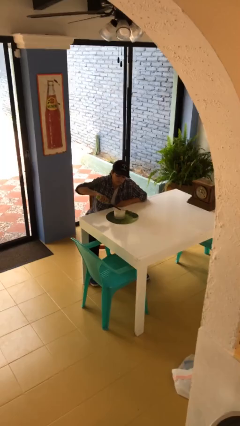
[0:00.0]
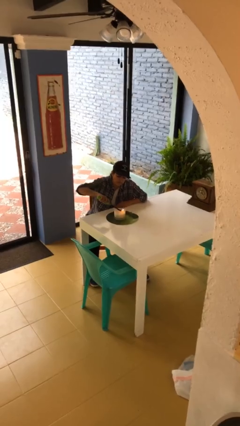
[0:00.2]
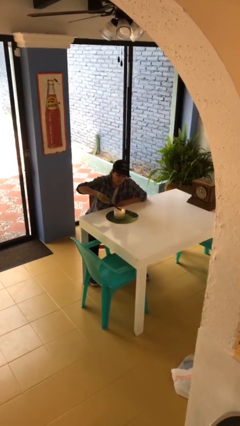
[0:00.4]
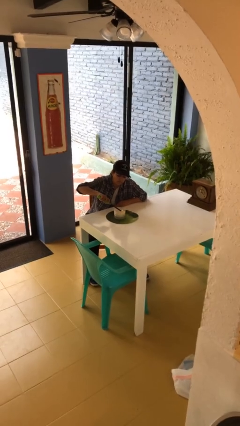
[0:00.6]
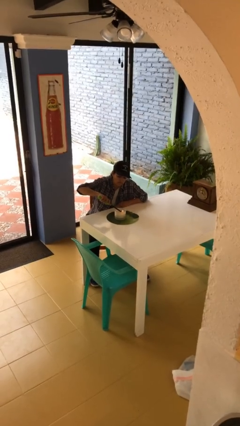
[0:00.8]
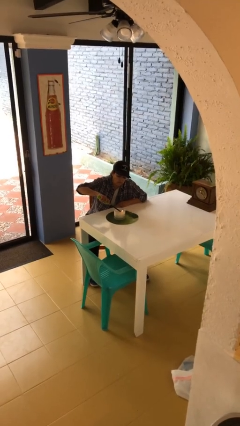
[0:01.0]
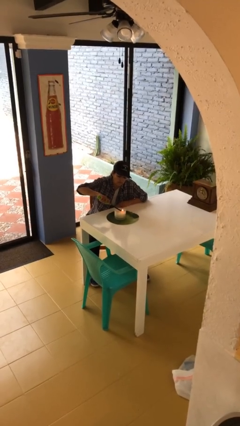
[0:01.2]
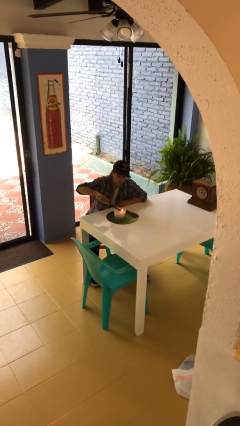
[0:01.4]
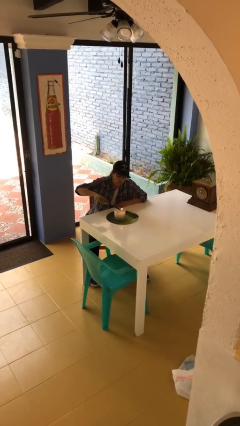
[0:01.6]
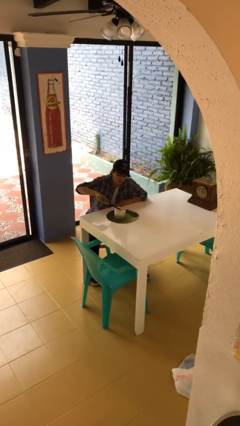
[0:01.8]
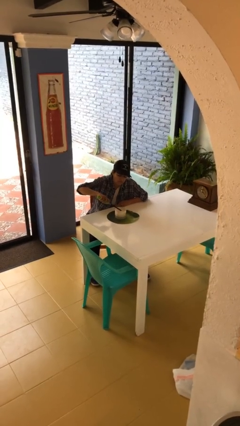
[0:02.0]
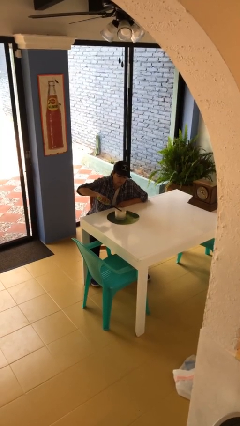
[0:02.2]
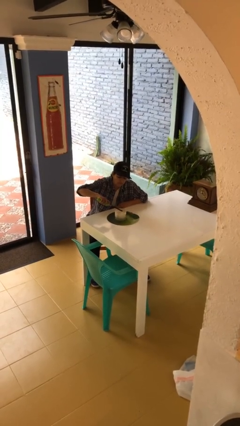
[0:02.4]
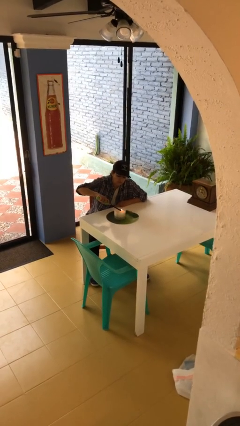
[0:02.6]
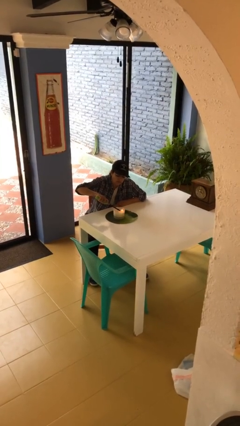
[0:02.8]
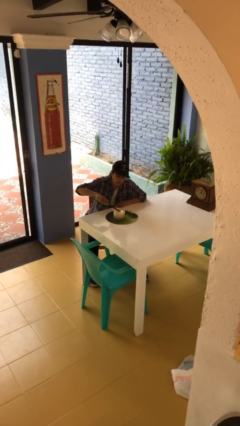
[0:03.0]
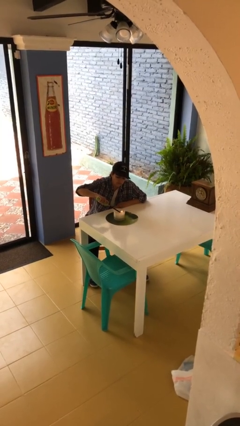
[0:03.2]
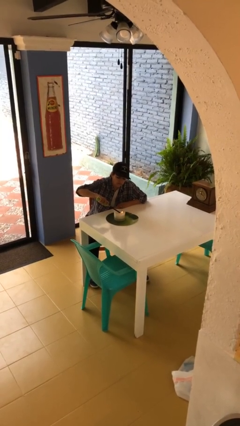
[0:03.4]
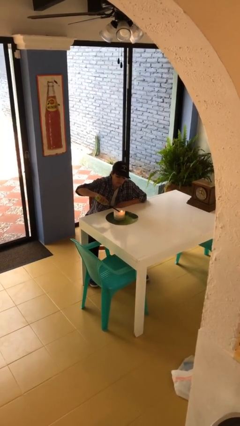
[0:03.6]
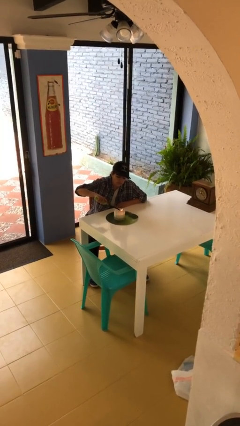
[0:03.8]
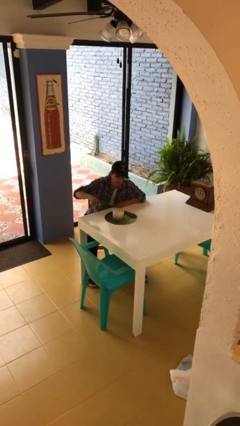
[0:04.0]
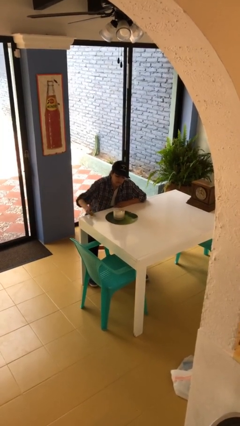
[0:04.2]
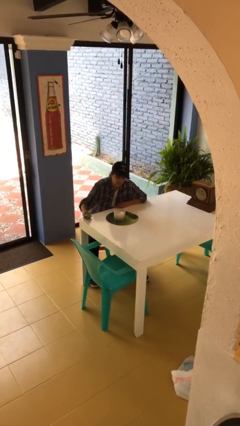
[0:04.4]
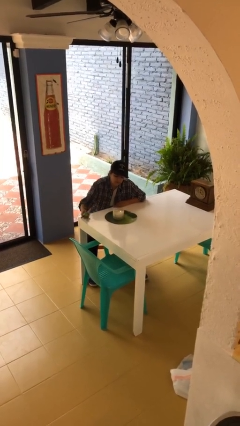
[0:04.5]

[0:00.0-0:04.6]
person lights candle

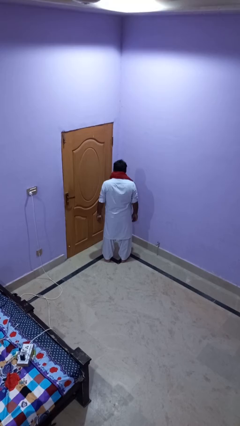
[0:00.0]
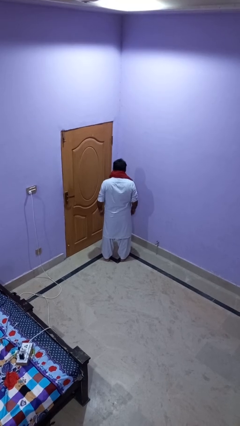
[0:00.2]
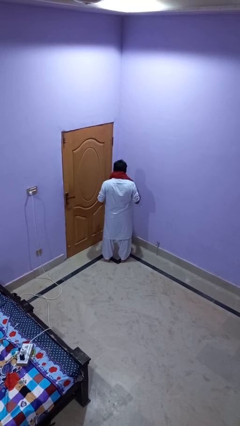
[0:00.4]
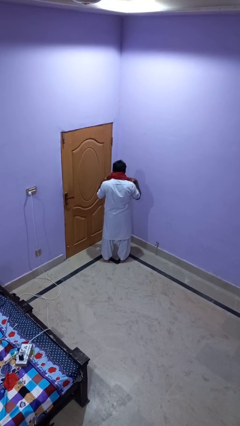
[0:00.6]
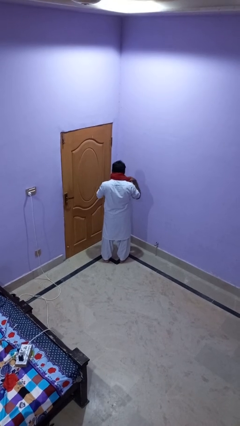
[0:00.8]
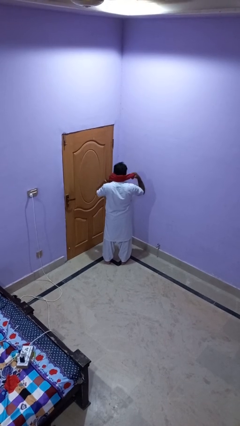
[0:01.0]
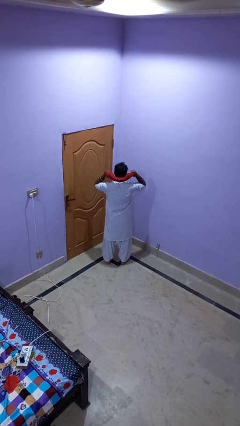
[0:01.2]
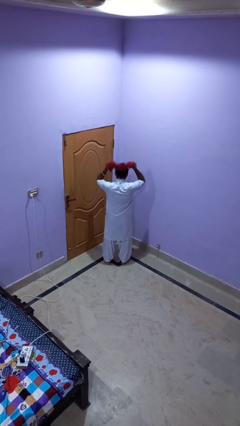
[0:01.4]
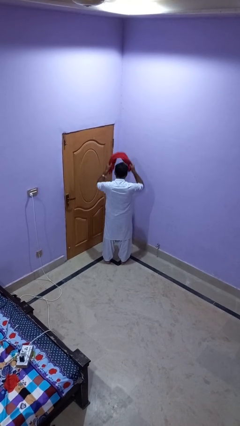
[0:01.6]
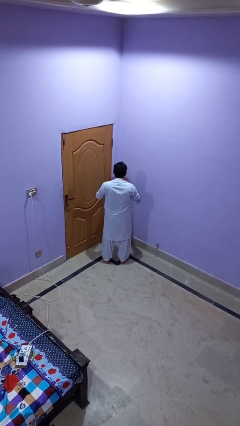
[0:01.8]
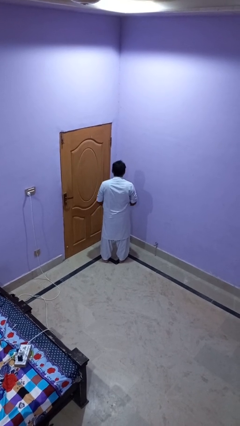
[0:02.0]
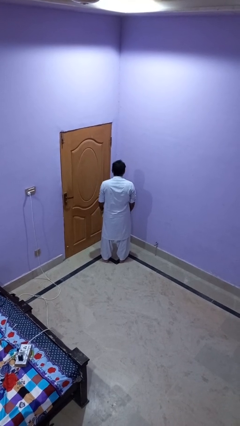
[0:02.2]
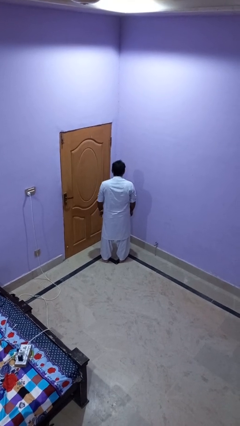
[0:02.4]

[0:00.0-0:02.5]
person takes off scarf

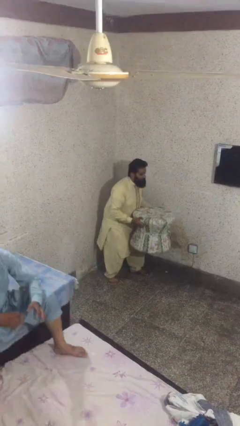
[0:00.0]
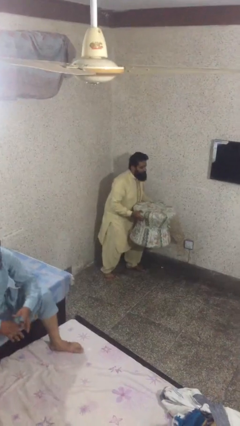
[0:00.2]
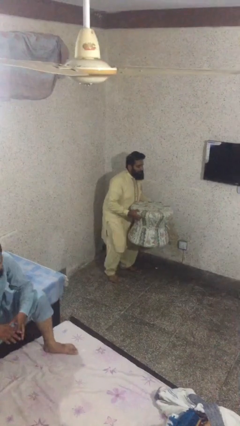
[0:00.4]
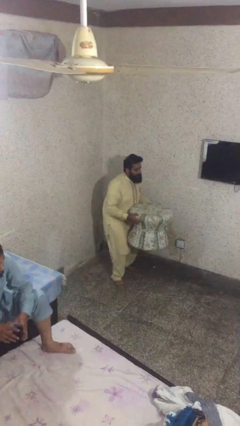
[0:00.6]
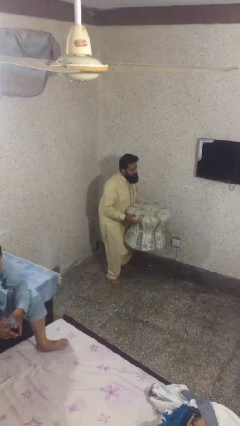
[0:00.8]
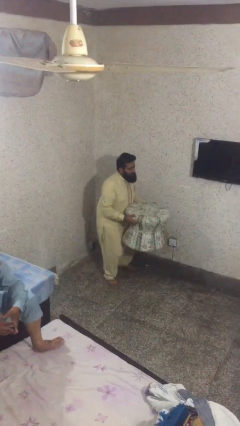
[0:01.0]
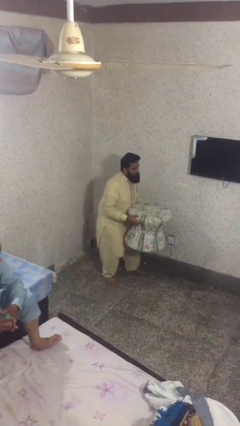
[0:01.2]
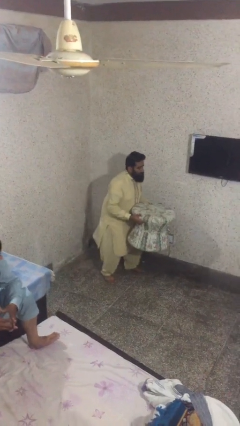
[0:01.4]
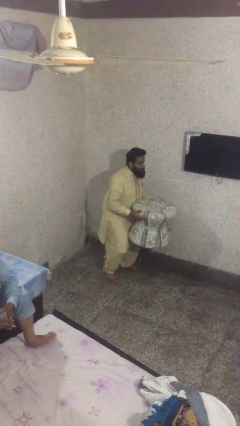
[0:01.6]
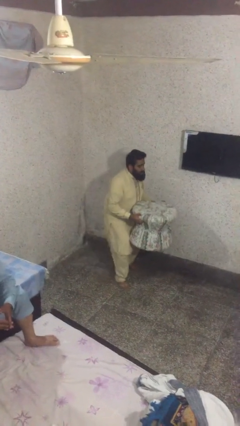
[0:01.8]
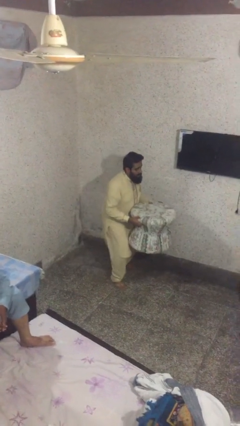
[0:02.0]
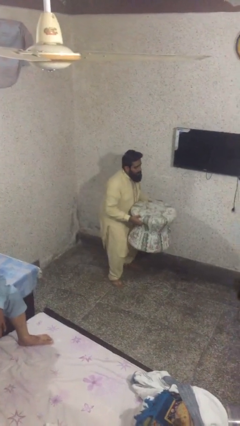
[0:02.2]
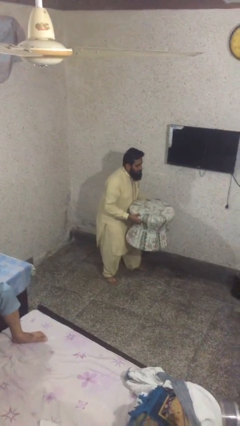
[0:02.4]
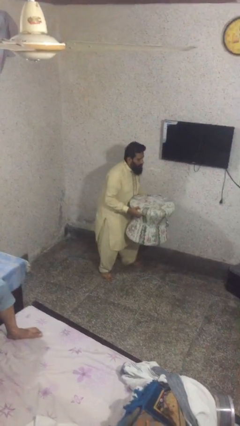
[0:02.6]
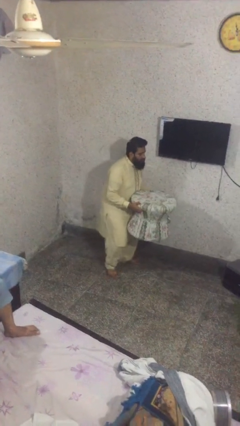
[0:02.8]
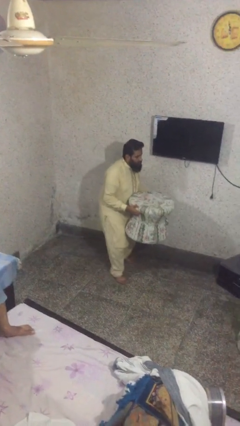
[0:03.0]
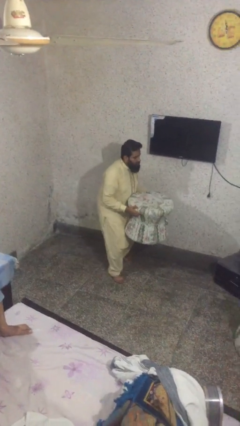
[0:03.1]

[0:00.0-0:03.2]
person carries heavy object

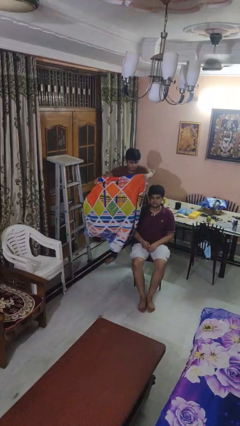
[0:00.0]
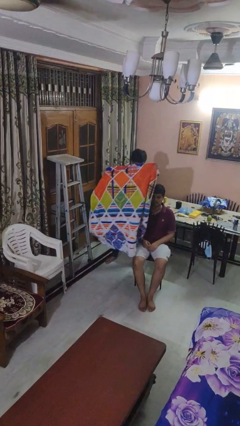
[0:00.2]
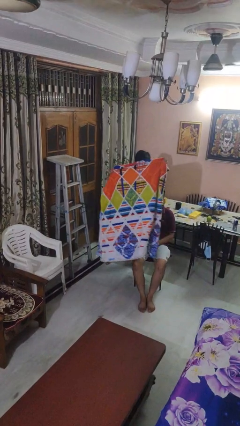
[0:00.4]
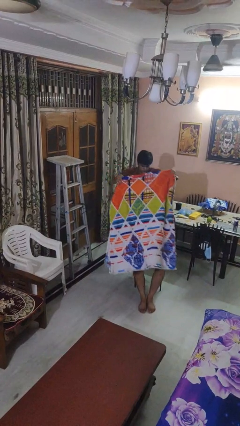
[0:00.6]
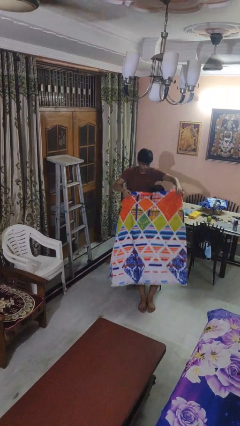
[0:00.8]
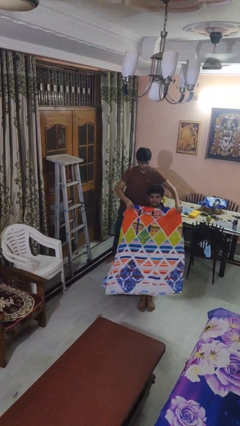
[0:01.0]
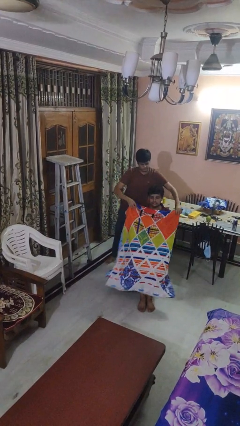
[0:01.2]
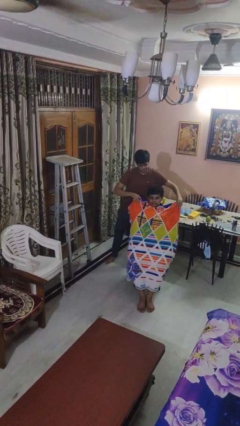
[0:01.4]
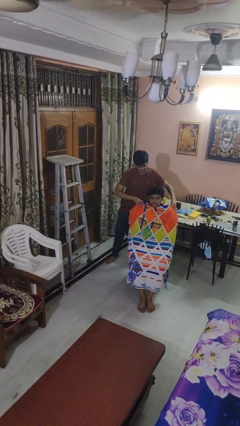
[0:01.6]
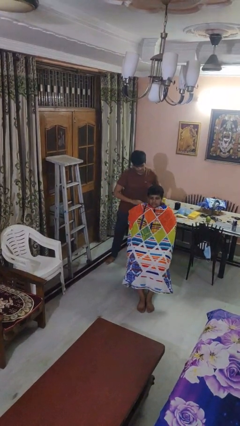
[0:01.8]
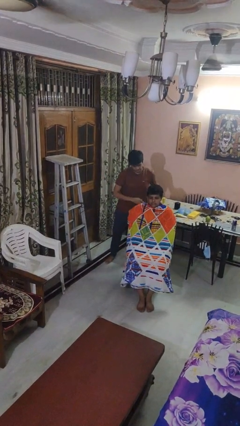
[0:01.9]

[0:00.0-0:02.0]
person covers friend with blanket

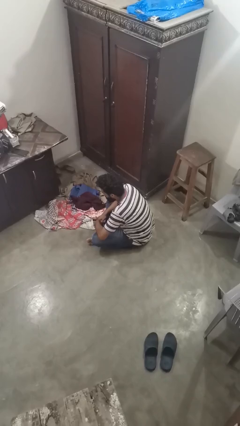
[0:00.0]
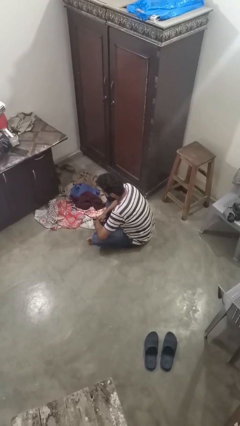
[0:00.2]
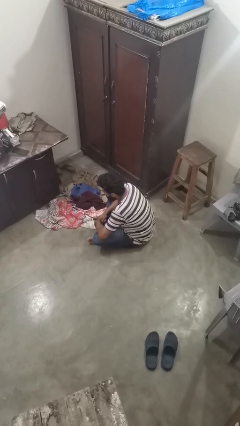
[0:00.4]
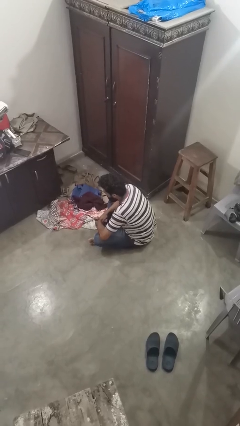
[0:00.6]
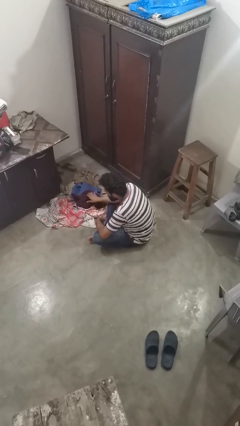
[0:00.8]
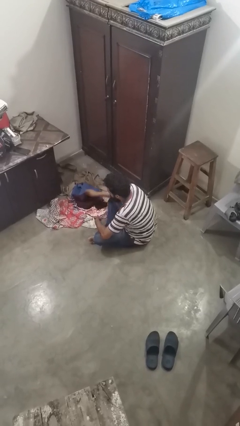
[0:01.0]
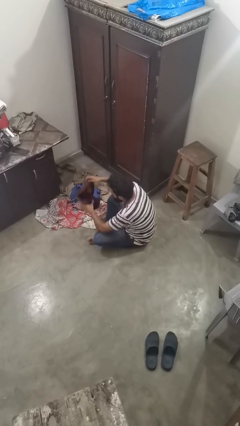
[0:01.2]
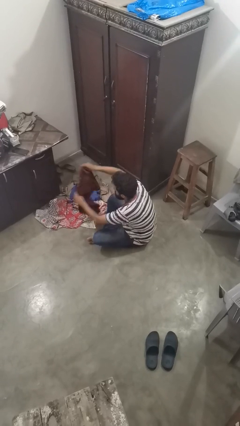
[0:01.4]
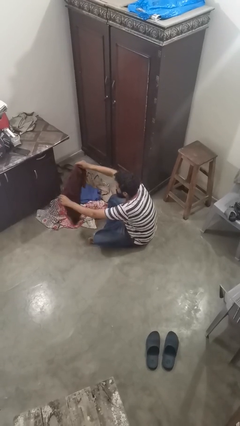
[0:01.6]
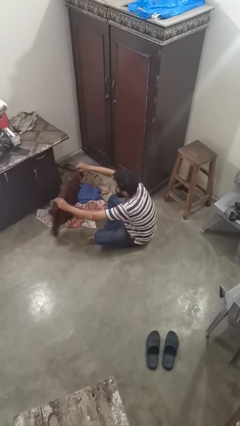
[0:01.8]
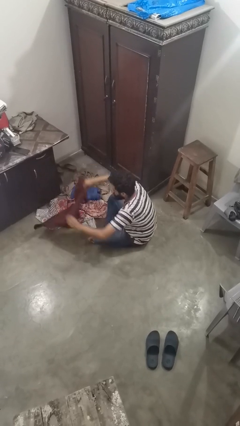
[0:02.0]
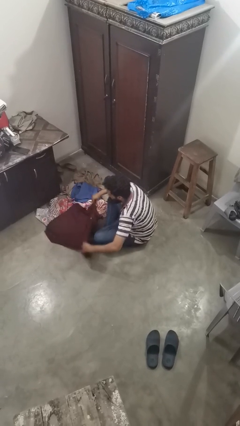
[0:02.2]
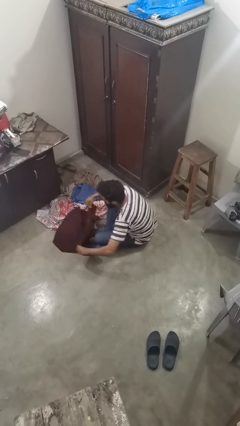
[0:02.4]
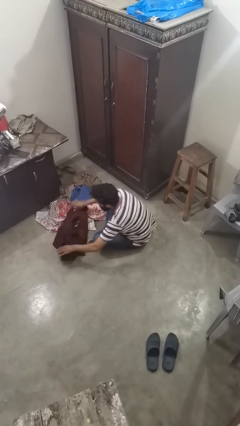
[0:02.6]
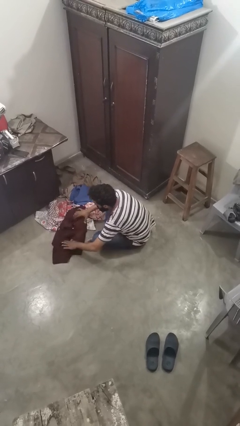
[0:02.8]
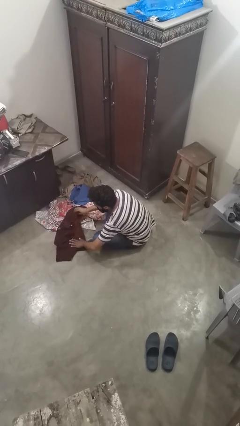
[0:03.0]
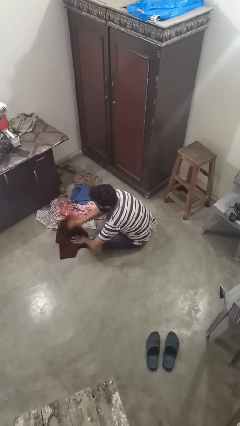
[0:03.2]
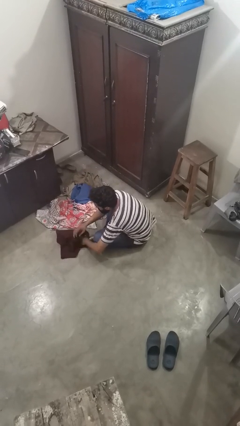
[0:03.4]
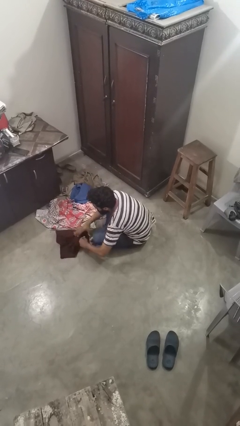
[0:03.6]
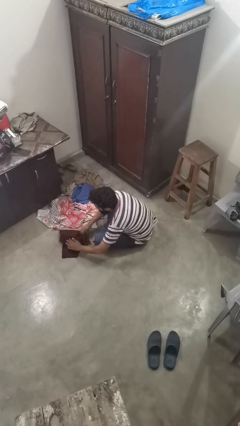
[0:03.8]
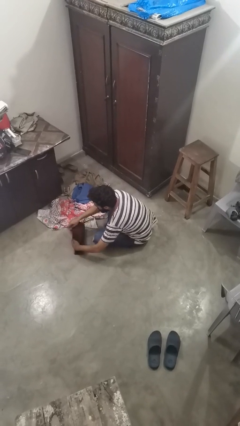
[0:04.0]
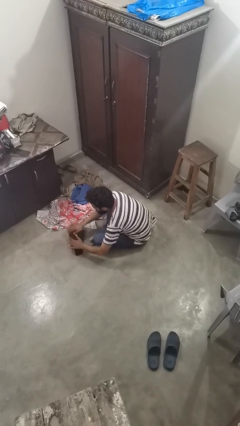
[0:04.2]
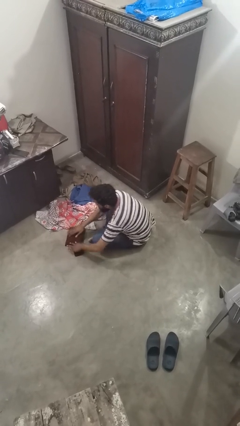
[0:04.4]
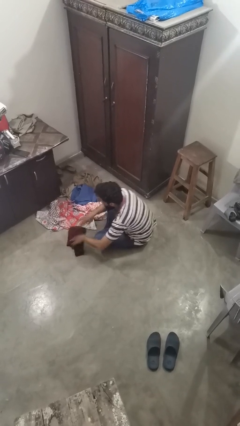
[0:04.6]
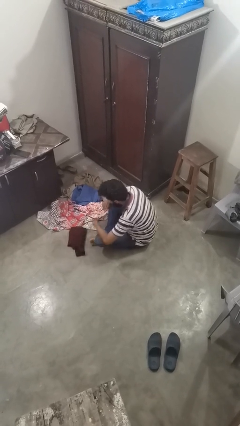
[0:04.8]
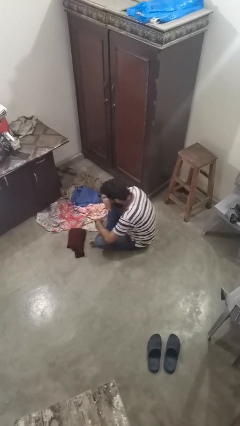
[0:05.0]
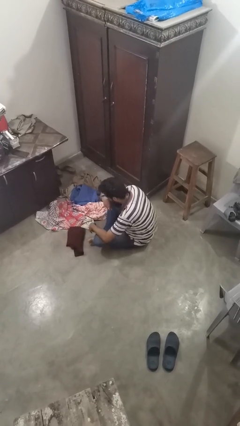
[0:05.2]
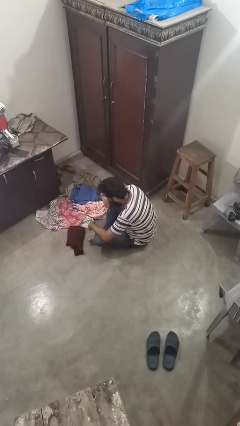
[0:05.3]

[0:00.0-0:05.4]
person folds shirt

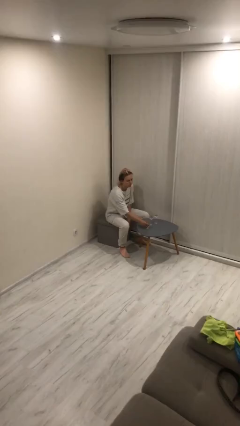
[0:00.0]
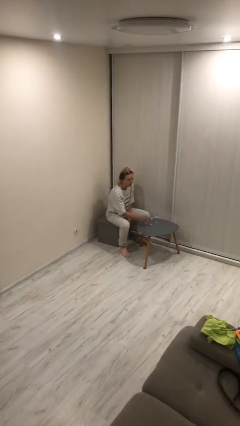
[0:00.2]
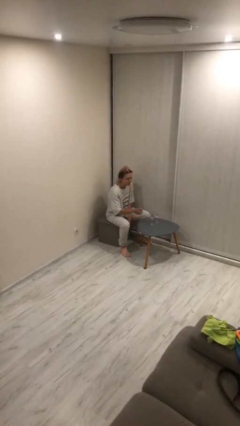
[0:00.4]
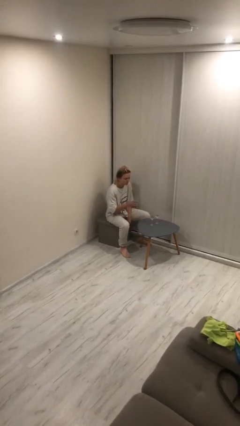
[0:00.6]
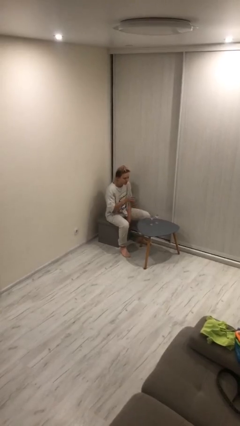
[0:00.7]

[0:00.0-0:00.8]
person picks up object from table
